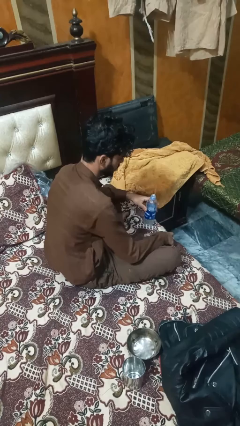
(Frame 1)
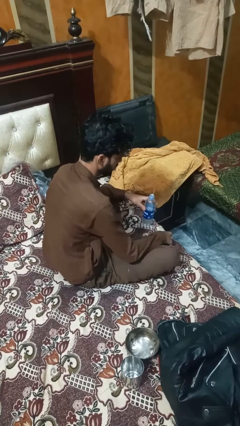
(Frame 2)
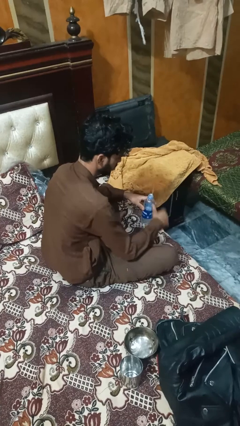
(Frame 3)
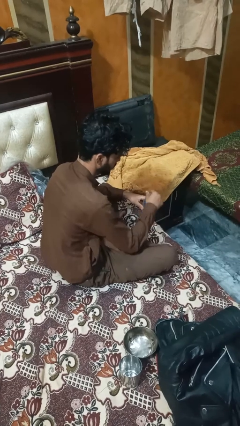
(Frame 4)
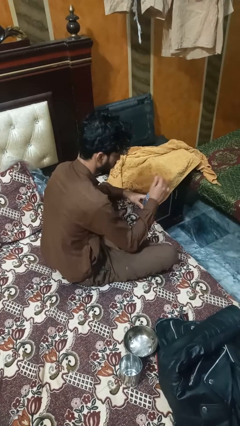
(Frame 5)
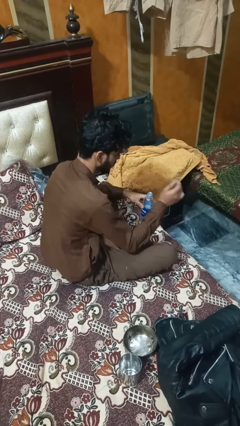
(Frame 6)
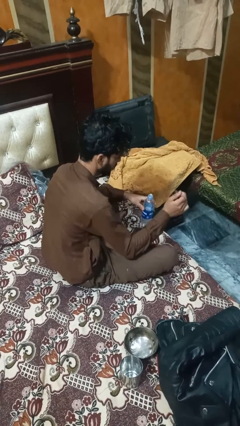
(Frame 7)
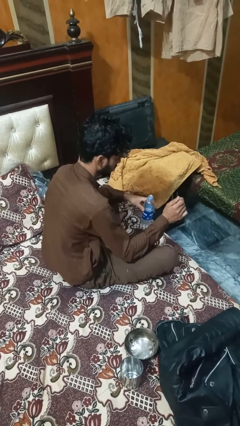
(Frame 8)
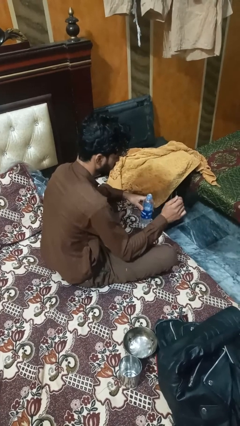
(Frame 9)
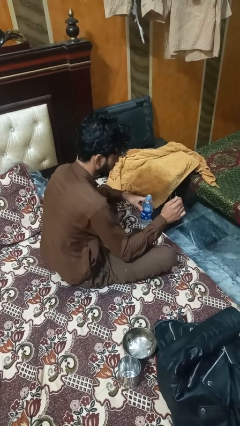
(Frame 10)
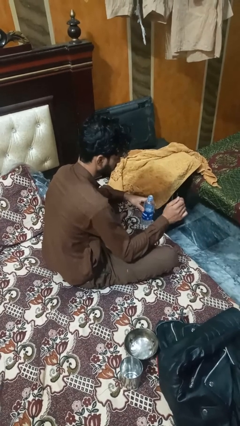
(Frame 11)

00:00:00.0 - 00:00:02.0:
person unscrews lid from bottle

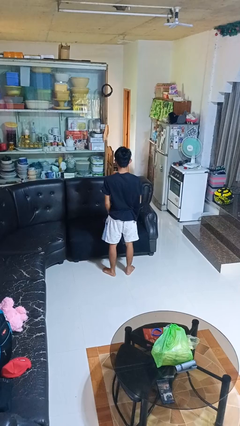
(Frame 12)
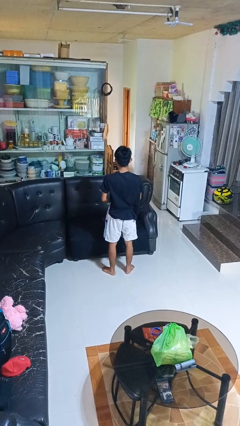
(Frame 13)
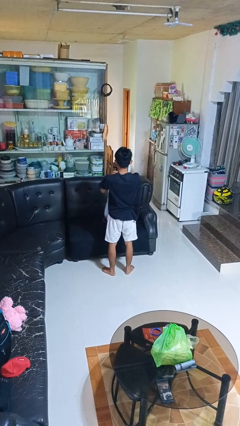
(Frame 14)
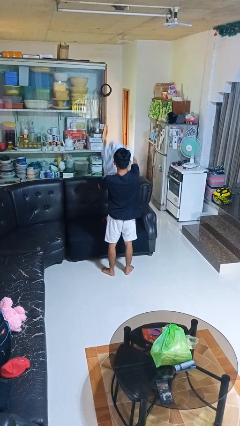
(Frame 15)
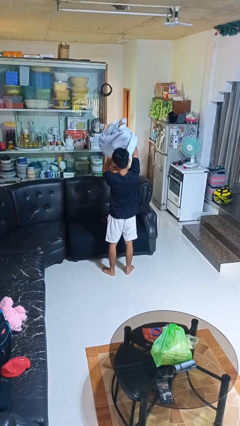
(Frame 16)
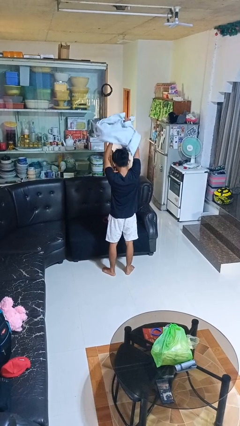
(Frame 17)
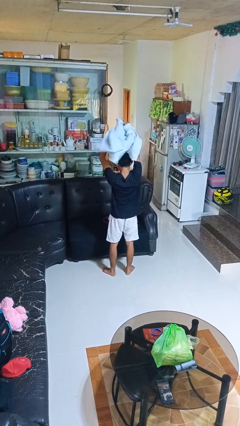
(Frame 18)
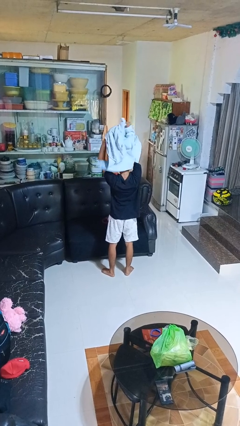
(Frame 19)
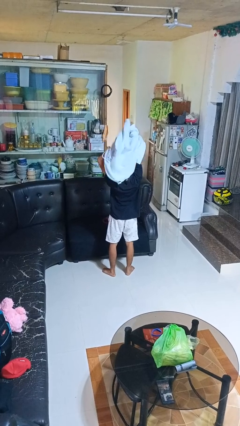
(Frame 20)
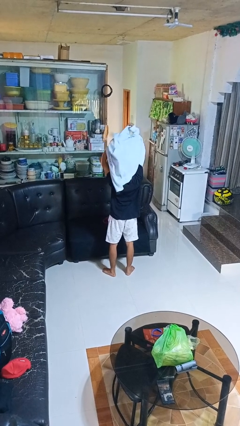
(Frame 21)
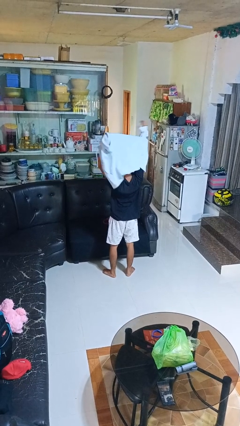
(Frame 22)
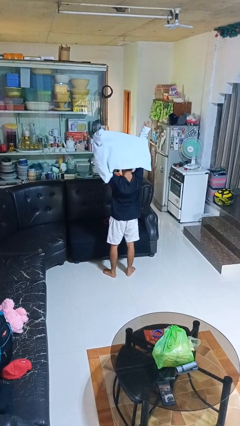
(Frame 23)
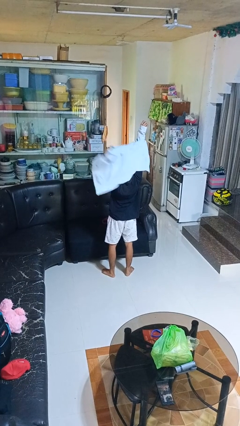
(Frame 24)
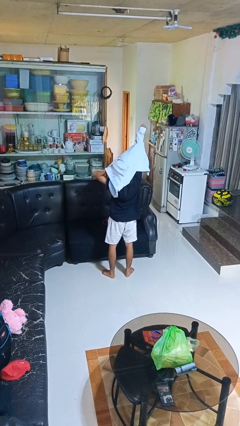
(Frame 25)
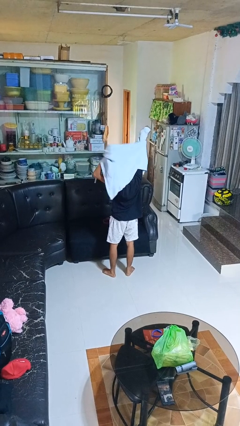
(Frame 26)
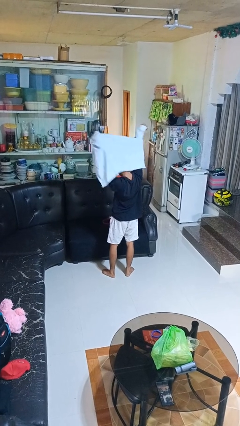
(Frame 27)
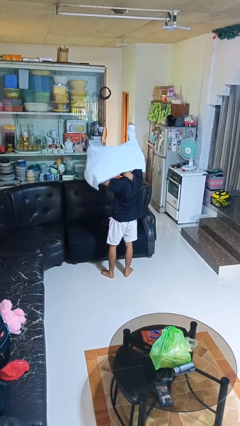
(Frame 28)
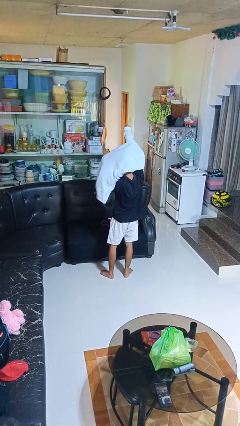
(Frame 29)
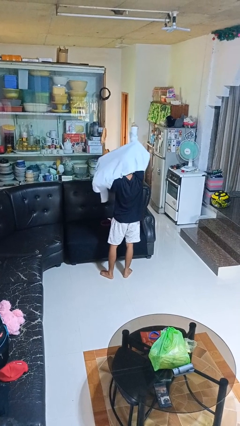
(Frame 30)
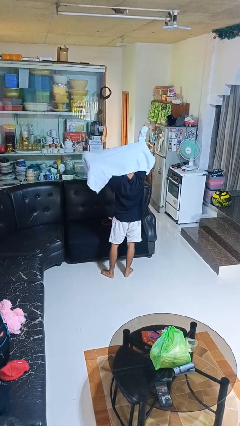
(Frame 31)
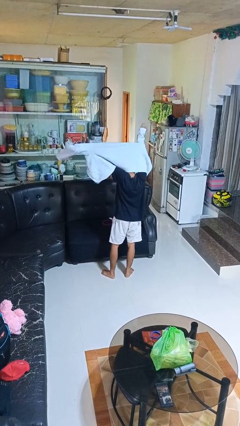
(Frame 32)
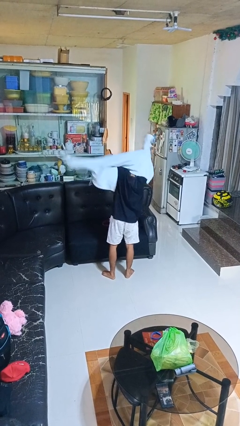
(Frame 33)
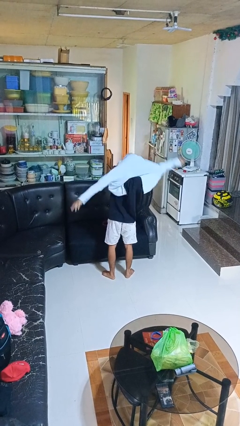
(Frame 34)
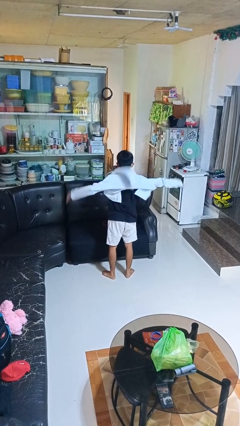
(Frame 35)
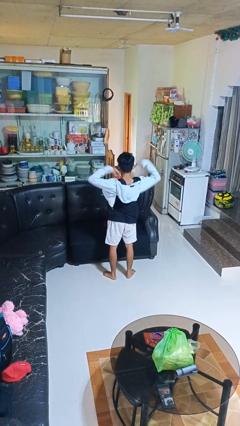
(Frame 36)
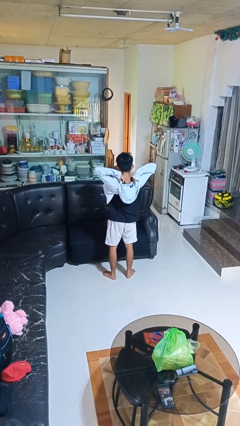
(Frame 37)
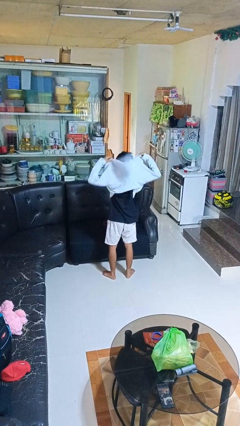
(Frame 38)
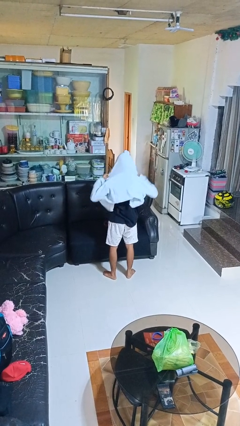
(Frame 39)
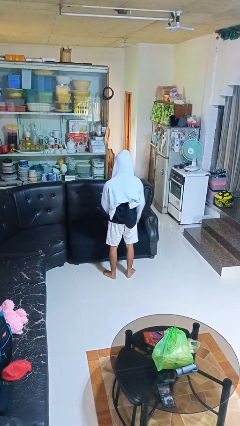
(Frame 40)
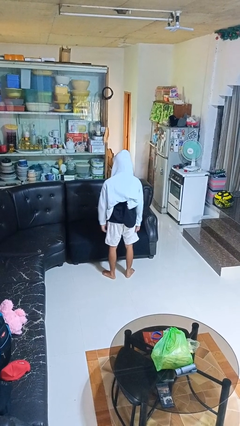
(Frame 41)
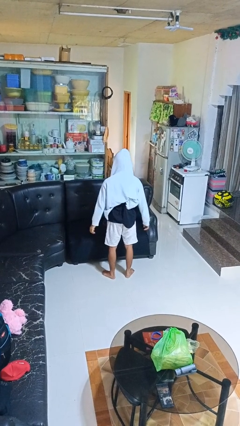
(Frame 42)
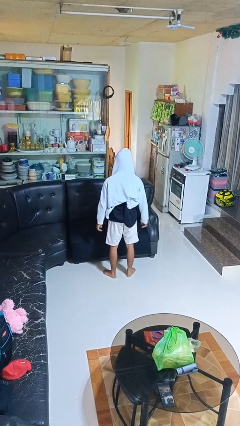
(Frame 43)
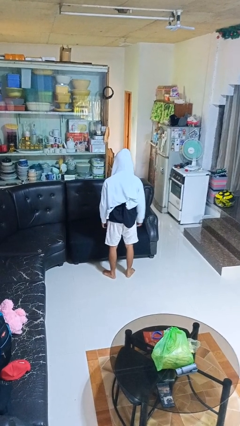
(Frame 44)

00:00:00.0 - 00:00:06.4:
person puts on hoodie

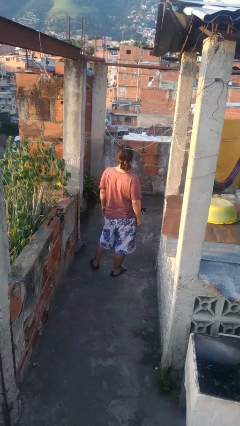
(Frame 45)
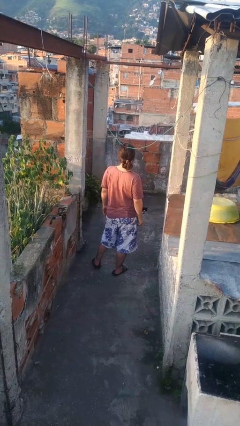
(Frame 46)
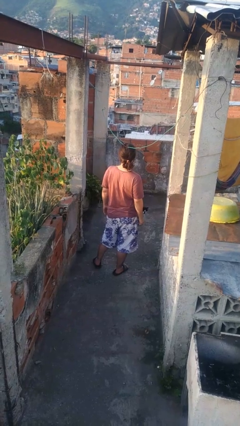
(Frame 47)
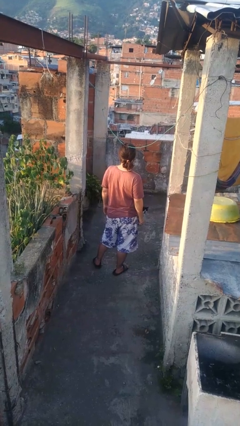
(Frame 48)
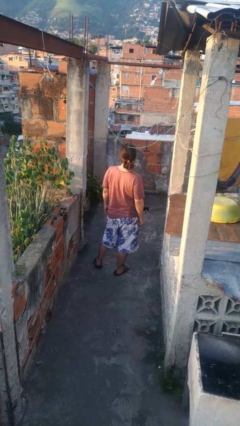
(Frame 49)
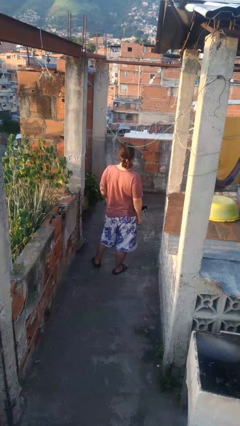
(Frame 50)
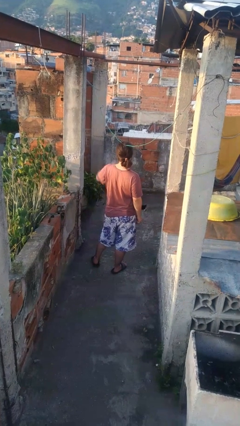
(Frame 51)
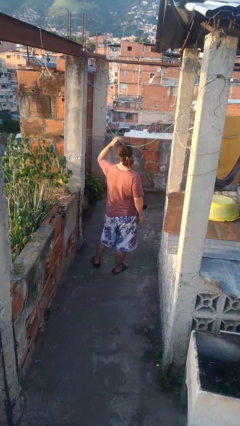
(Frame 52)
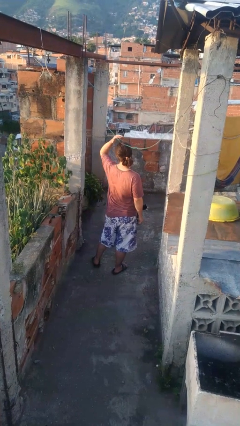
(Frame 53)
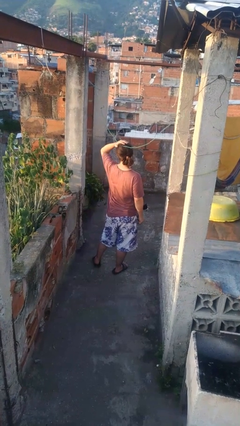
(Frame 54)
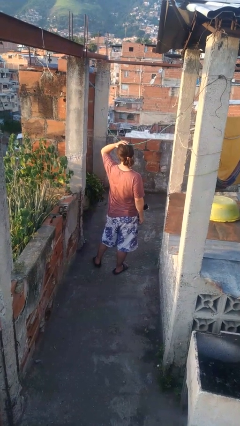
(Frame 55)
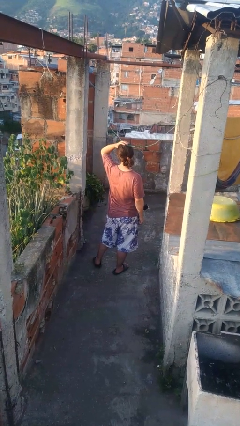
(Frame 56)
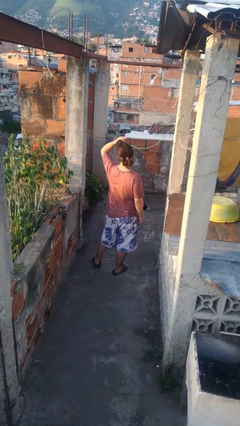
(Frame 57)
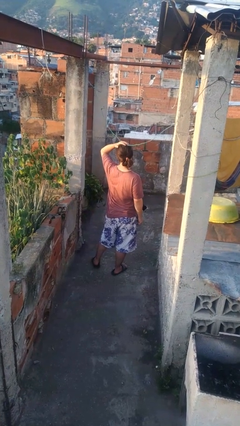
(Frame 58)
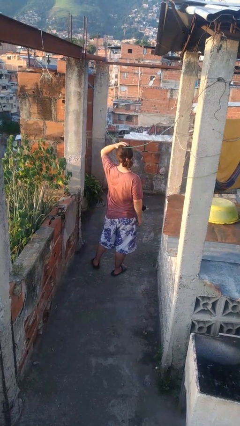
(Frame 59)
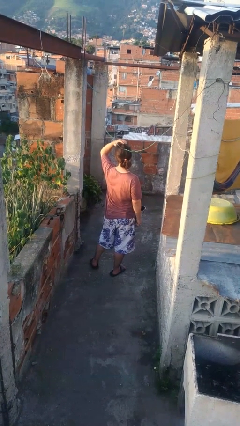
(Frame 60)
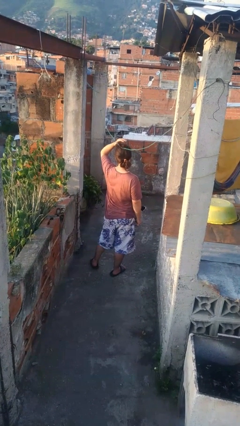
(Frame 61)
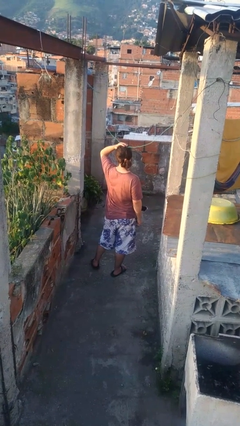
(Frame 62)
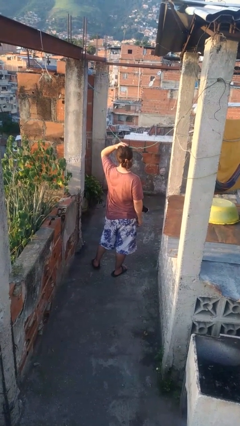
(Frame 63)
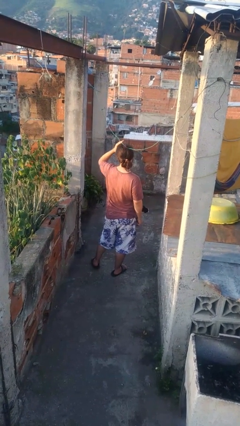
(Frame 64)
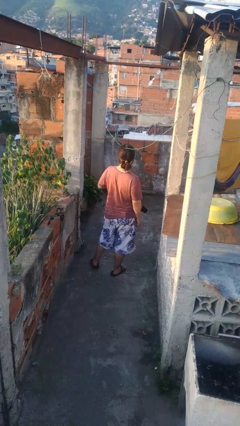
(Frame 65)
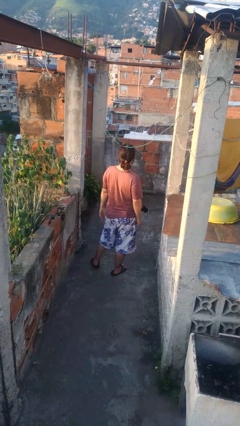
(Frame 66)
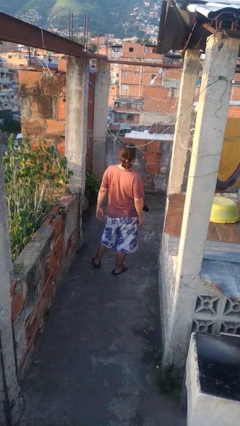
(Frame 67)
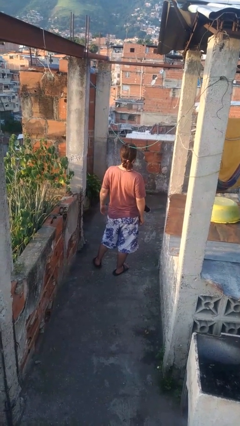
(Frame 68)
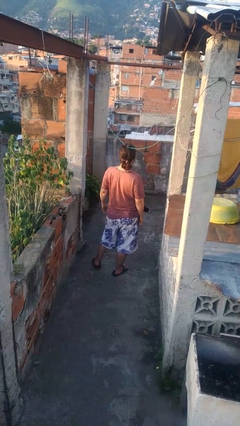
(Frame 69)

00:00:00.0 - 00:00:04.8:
person pats head

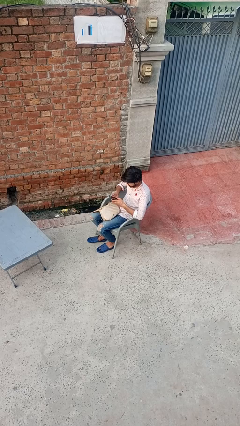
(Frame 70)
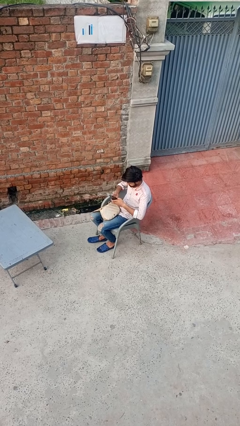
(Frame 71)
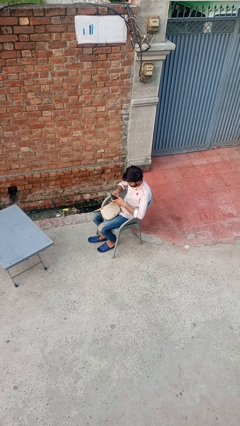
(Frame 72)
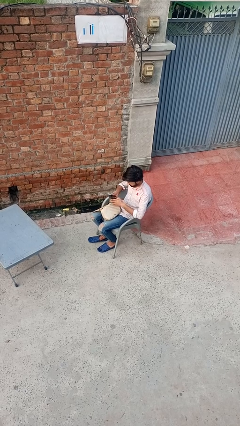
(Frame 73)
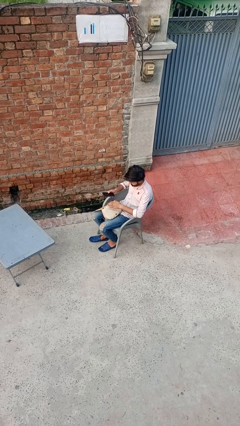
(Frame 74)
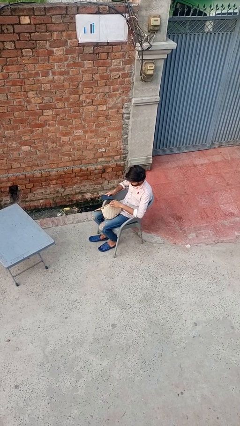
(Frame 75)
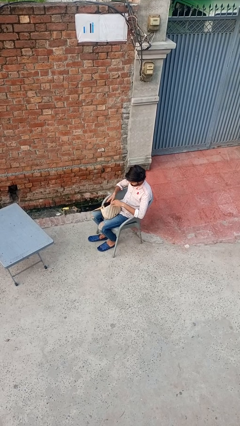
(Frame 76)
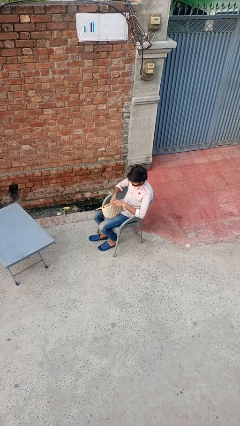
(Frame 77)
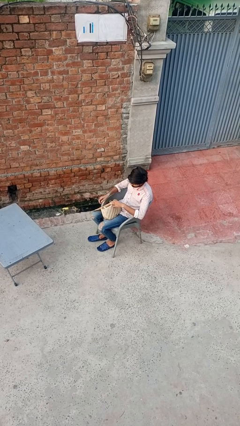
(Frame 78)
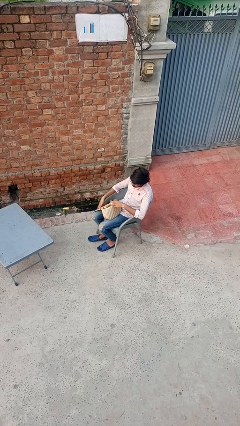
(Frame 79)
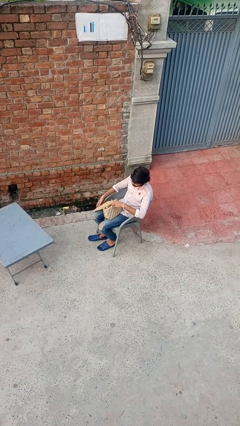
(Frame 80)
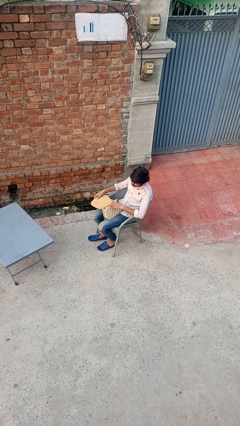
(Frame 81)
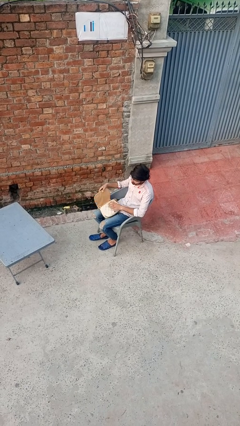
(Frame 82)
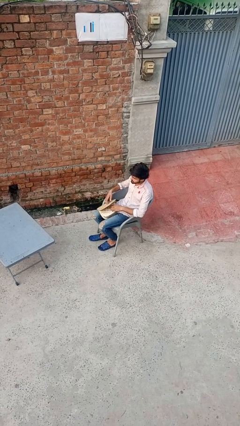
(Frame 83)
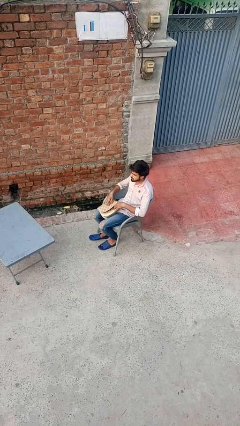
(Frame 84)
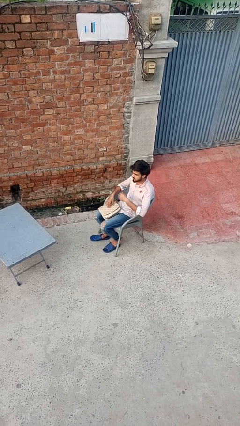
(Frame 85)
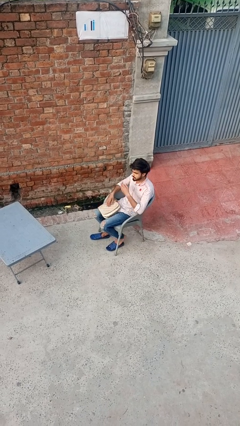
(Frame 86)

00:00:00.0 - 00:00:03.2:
person puts object into purse

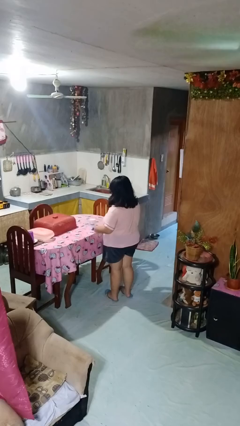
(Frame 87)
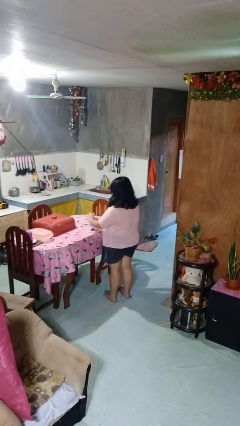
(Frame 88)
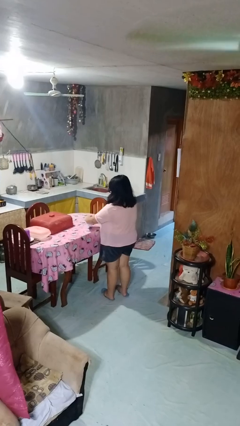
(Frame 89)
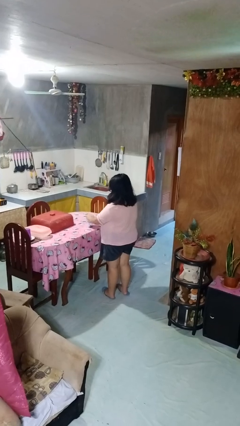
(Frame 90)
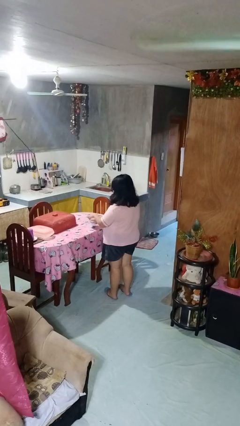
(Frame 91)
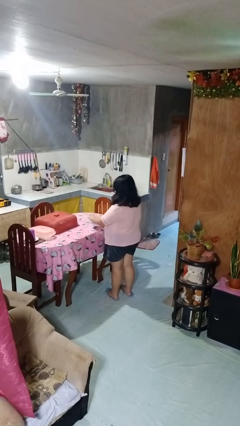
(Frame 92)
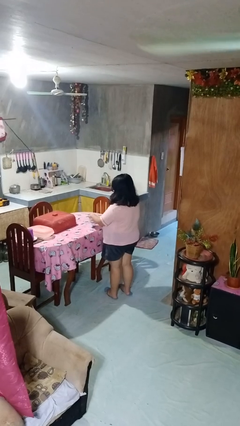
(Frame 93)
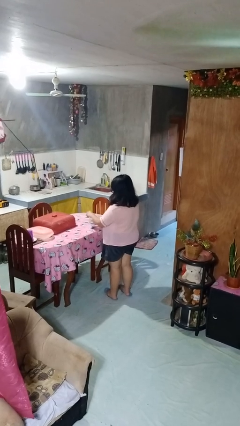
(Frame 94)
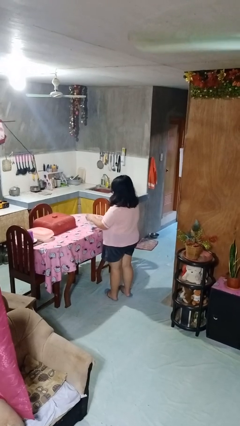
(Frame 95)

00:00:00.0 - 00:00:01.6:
person opens jar
